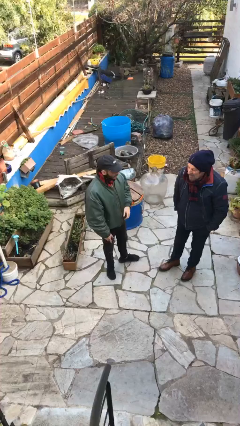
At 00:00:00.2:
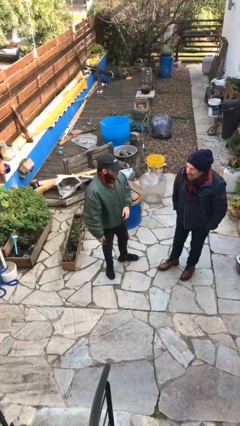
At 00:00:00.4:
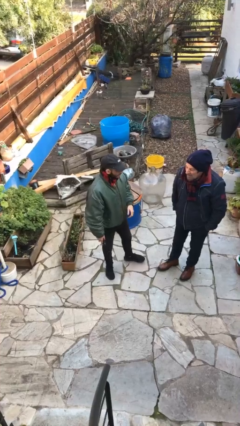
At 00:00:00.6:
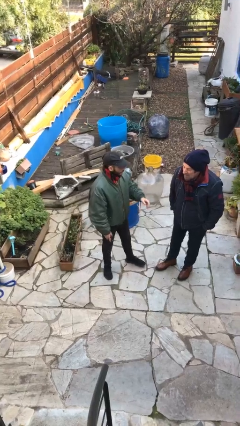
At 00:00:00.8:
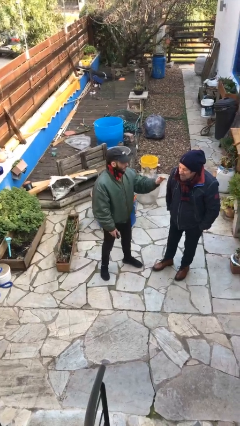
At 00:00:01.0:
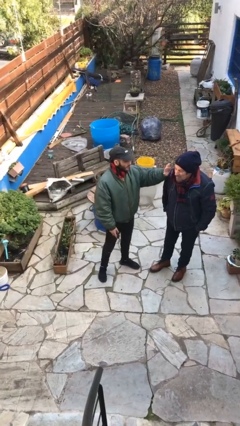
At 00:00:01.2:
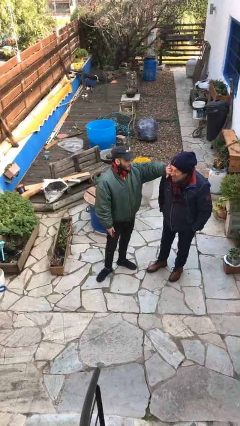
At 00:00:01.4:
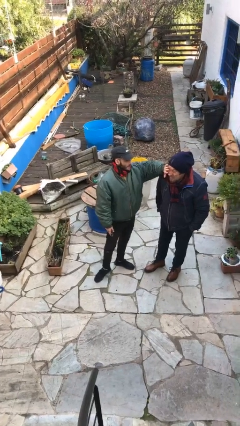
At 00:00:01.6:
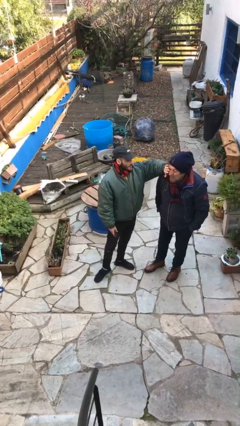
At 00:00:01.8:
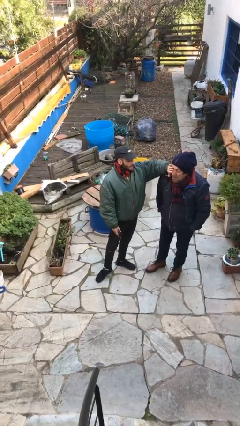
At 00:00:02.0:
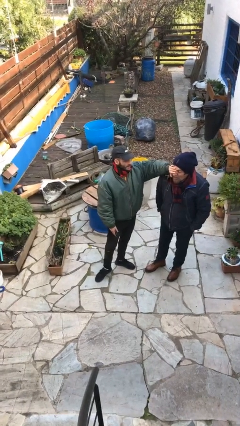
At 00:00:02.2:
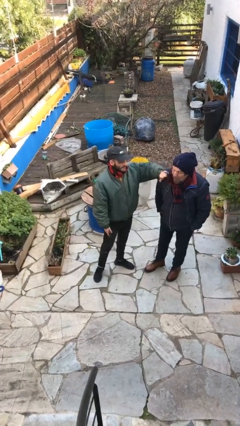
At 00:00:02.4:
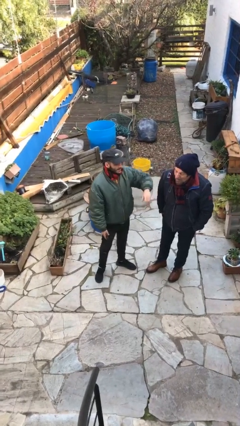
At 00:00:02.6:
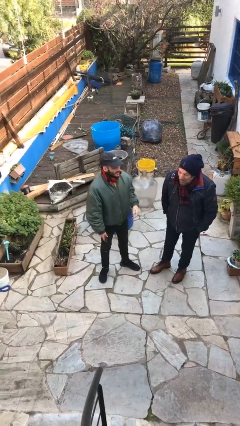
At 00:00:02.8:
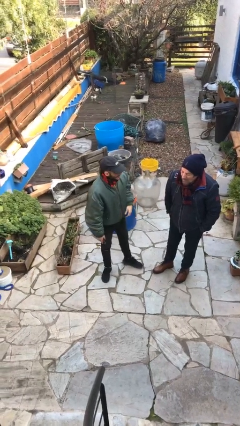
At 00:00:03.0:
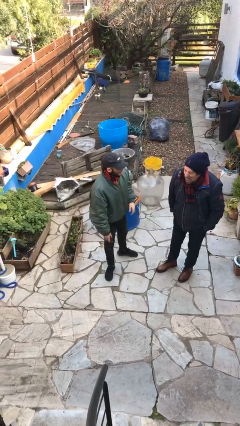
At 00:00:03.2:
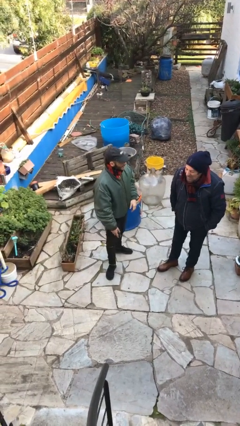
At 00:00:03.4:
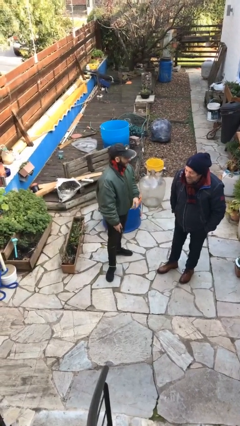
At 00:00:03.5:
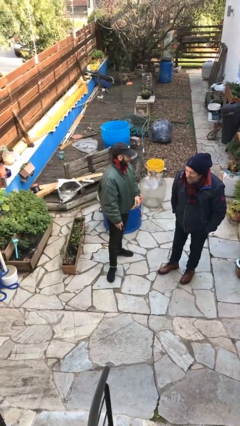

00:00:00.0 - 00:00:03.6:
person touches face of person

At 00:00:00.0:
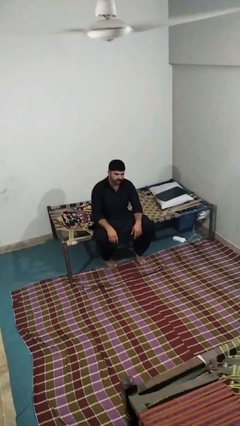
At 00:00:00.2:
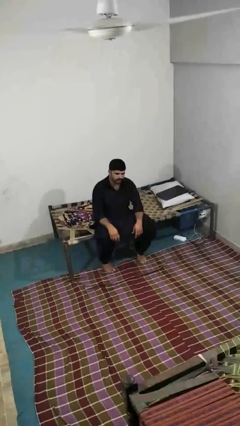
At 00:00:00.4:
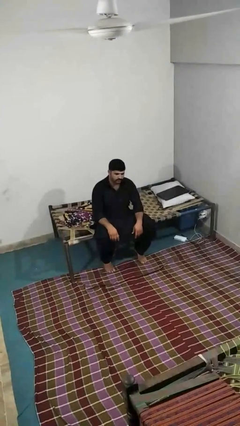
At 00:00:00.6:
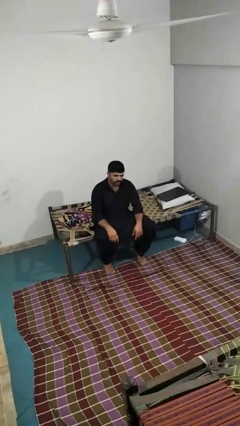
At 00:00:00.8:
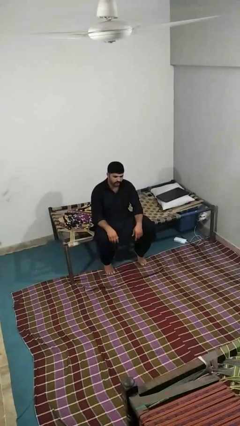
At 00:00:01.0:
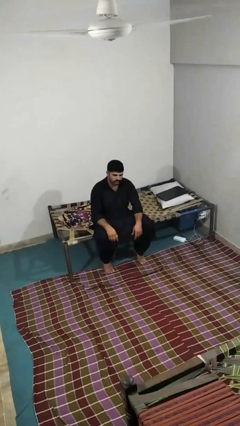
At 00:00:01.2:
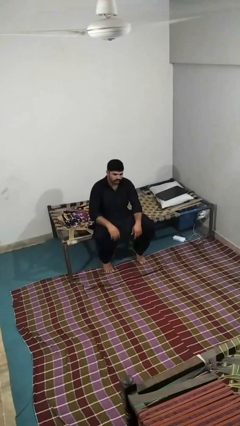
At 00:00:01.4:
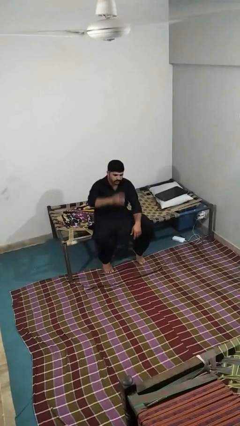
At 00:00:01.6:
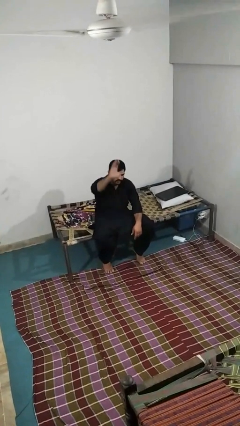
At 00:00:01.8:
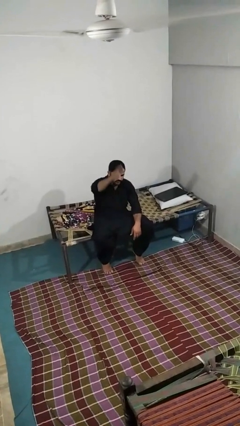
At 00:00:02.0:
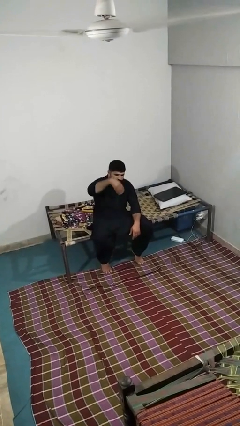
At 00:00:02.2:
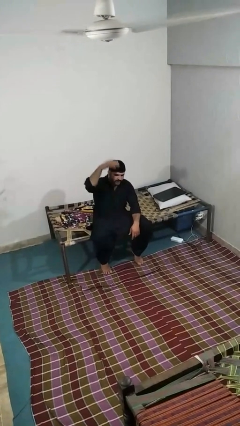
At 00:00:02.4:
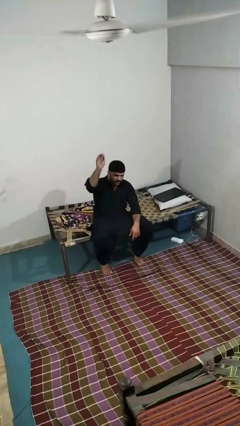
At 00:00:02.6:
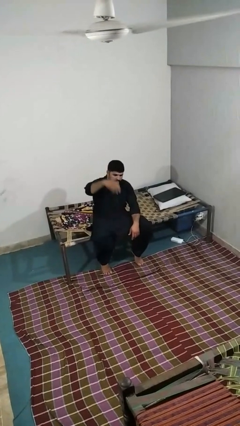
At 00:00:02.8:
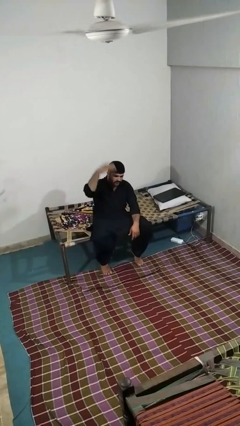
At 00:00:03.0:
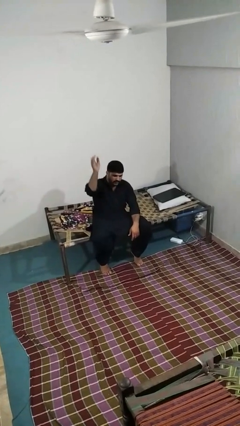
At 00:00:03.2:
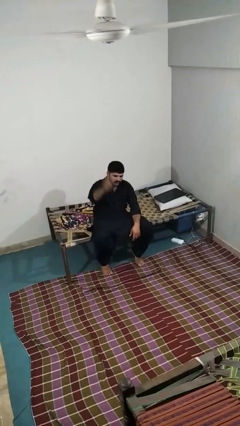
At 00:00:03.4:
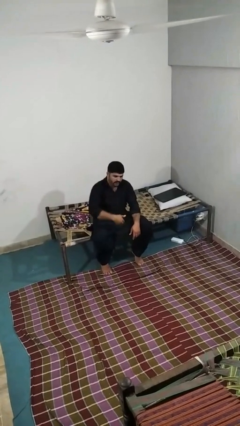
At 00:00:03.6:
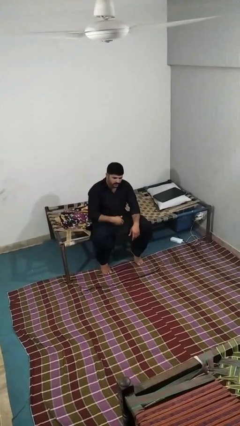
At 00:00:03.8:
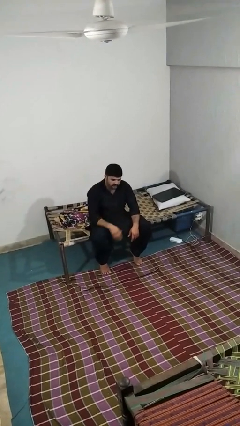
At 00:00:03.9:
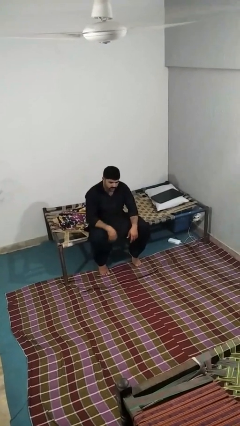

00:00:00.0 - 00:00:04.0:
person gestures come here

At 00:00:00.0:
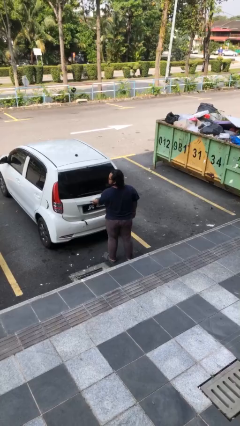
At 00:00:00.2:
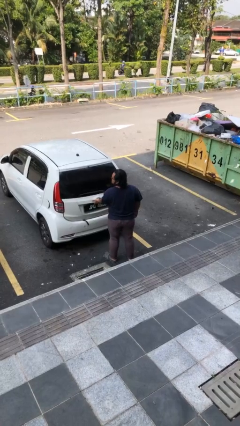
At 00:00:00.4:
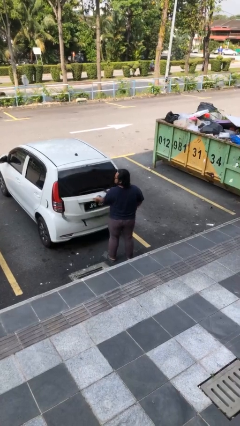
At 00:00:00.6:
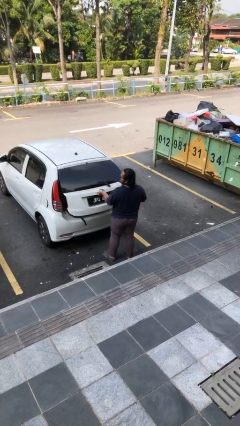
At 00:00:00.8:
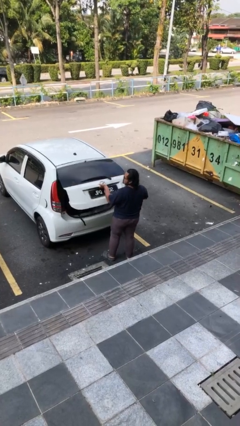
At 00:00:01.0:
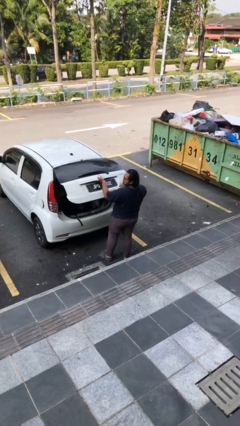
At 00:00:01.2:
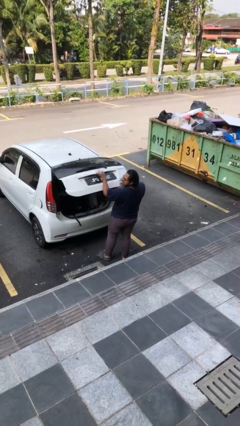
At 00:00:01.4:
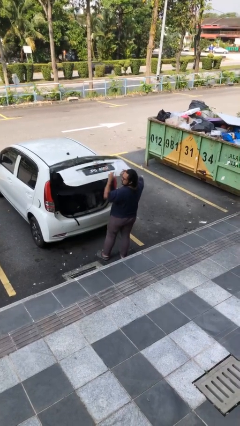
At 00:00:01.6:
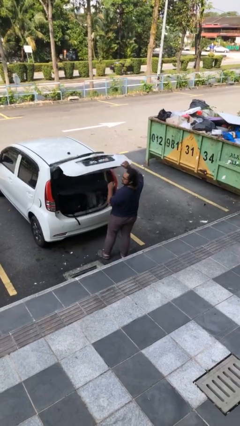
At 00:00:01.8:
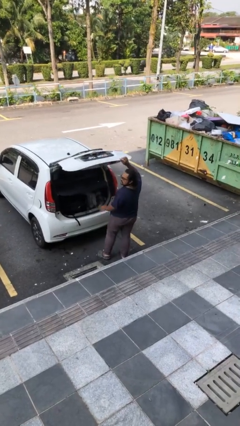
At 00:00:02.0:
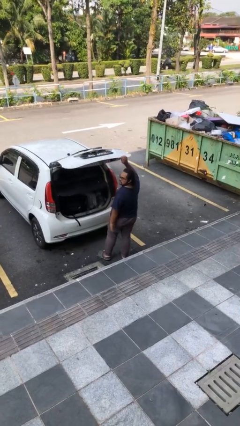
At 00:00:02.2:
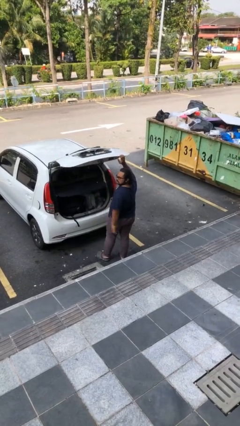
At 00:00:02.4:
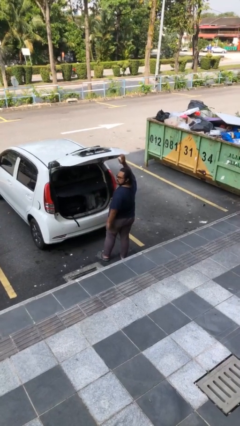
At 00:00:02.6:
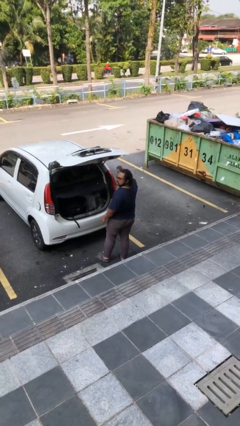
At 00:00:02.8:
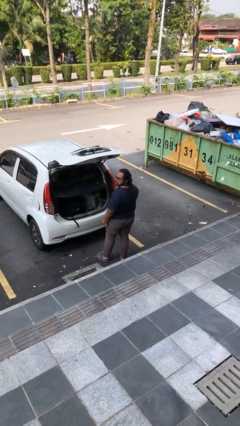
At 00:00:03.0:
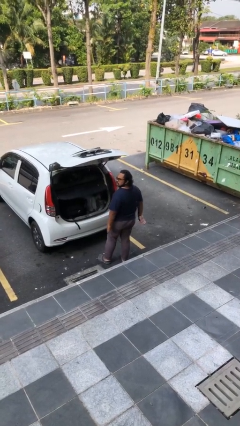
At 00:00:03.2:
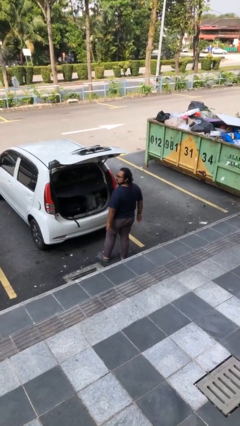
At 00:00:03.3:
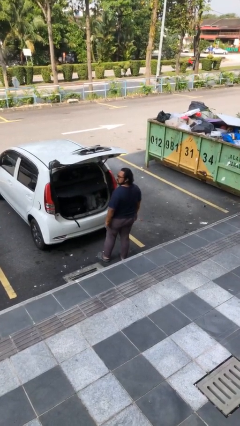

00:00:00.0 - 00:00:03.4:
person opens car trunk

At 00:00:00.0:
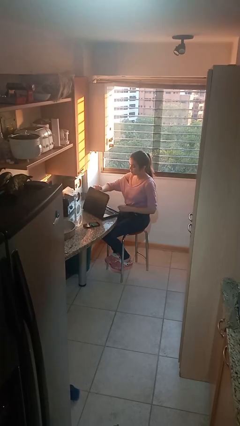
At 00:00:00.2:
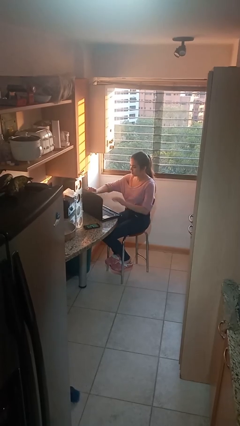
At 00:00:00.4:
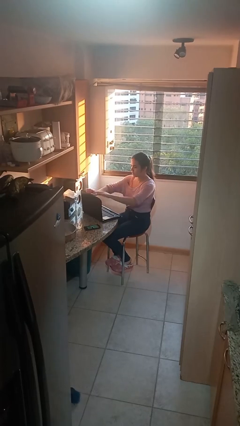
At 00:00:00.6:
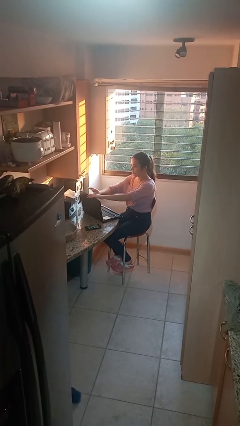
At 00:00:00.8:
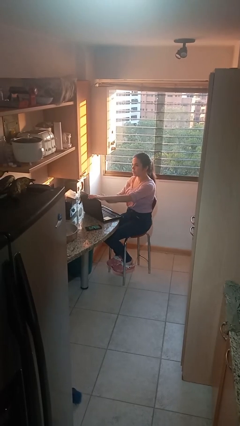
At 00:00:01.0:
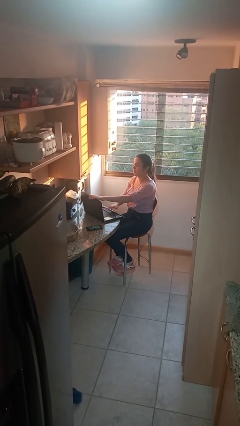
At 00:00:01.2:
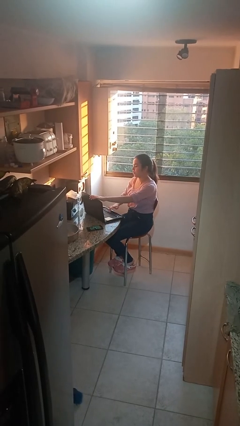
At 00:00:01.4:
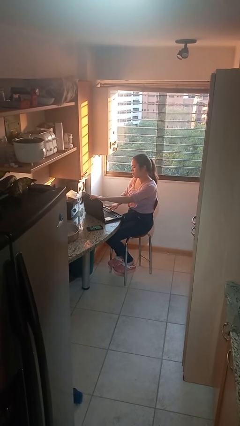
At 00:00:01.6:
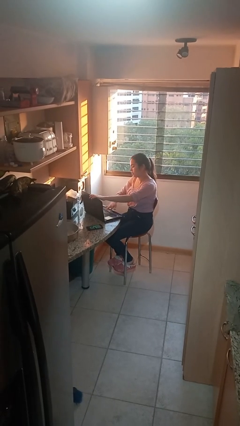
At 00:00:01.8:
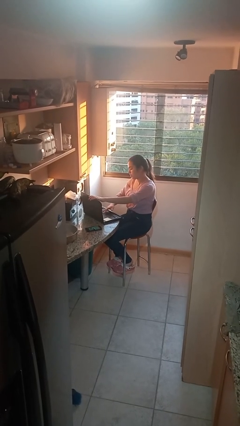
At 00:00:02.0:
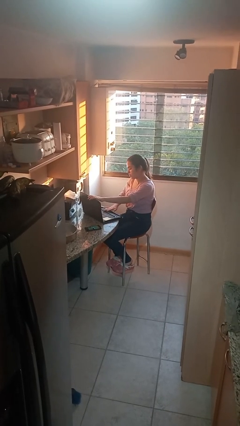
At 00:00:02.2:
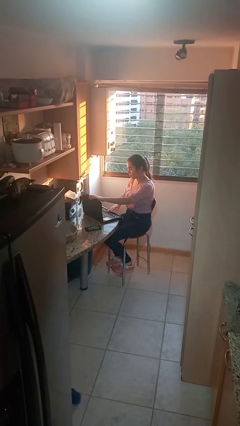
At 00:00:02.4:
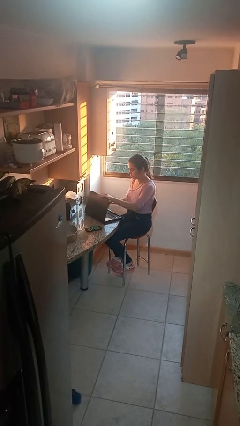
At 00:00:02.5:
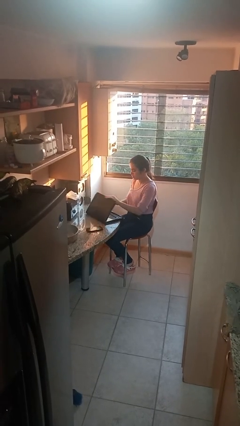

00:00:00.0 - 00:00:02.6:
person interacts with laptop

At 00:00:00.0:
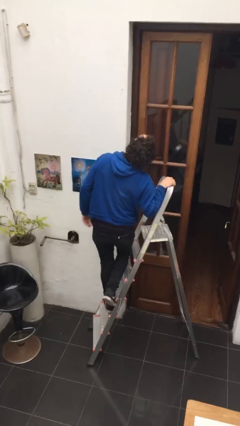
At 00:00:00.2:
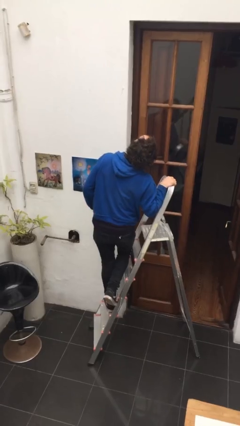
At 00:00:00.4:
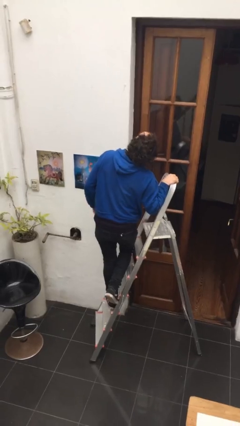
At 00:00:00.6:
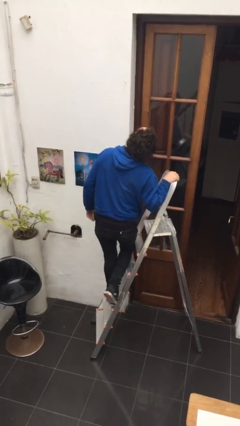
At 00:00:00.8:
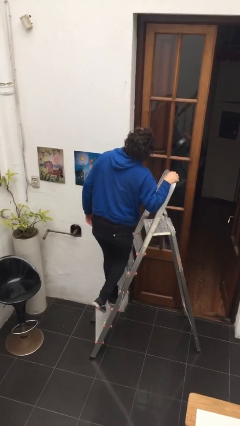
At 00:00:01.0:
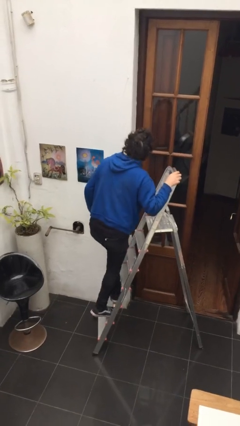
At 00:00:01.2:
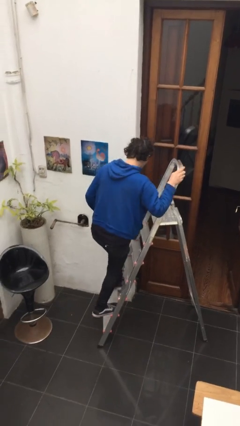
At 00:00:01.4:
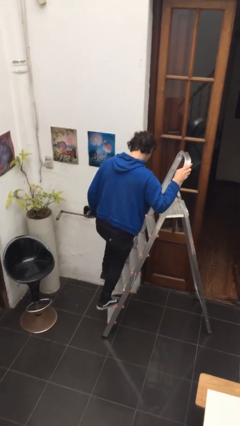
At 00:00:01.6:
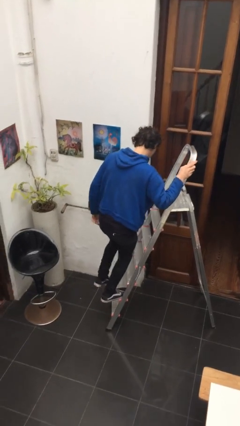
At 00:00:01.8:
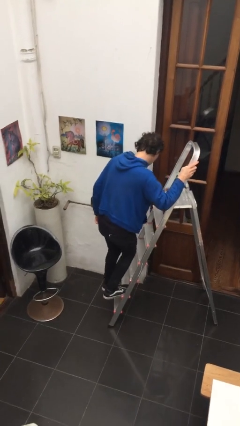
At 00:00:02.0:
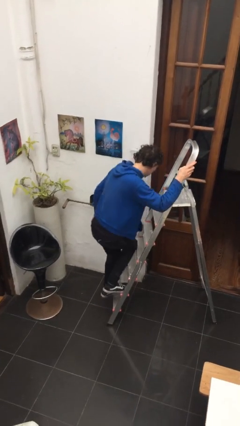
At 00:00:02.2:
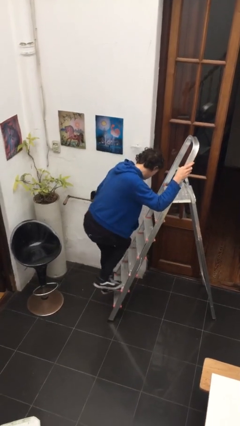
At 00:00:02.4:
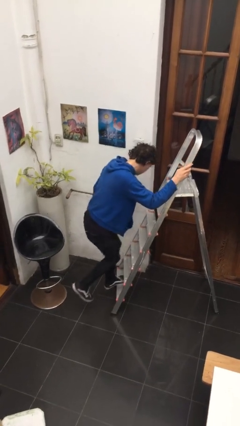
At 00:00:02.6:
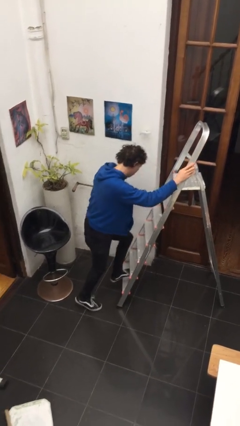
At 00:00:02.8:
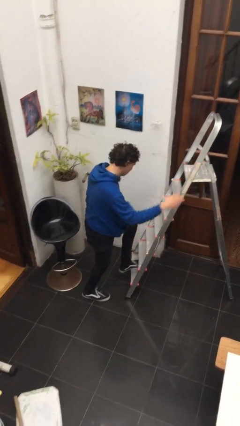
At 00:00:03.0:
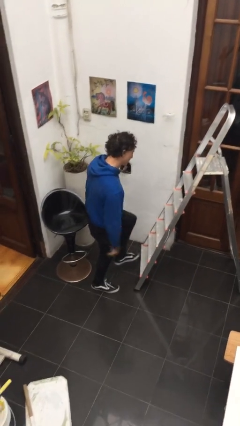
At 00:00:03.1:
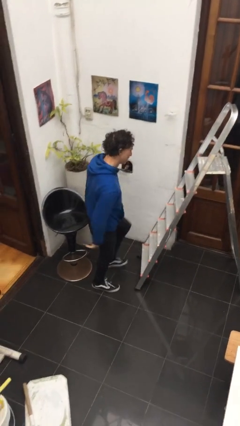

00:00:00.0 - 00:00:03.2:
person climbs down ladder

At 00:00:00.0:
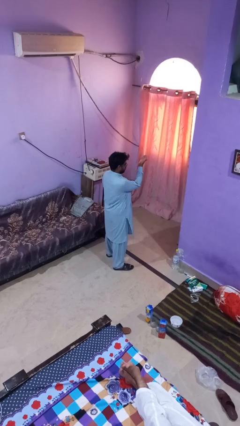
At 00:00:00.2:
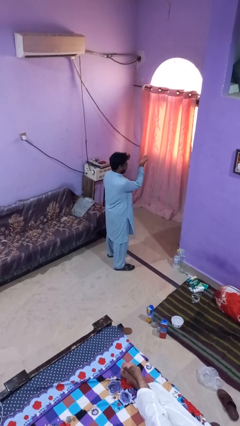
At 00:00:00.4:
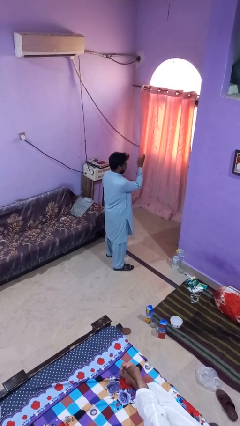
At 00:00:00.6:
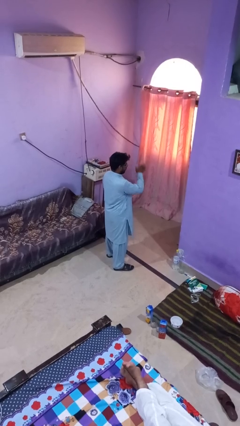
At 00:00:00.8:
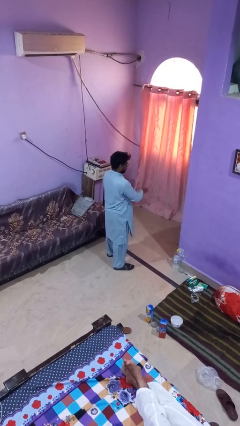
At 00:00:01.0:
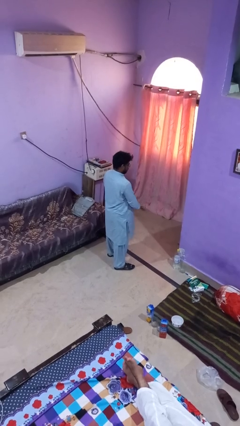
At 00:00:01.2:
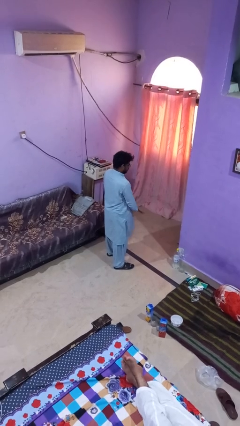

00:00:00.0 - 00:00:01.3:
person gestures swipe down
